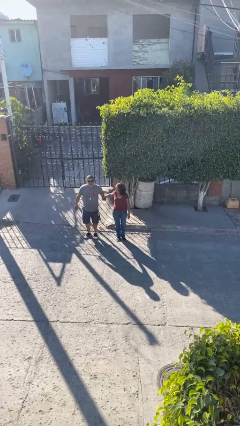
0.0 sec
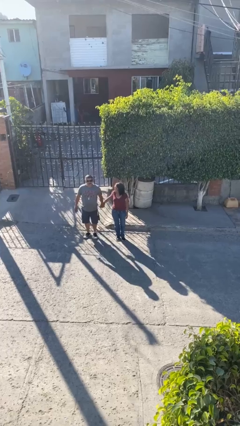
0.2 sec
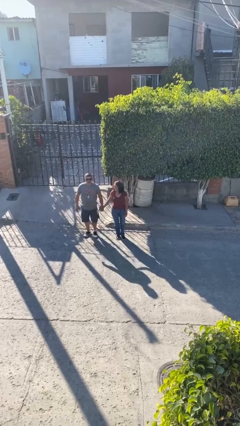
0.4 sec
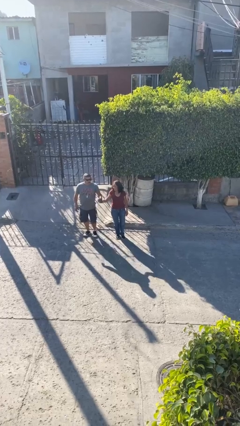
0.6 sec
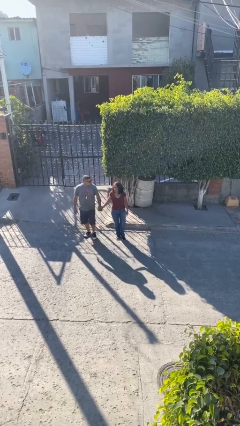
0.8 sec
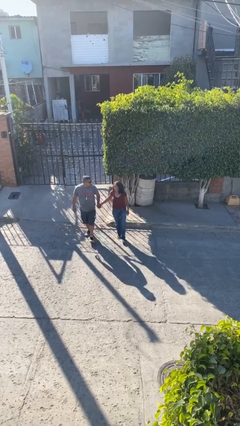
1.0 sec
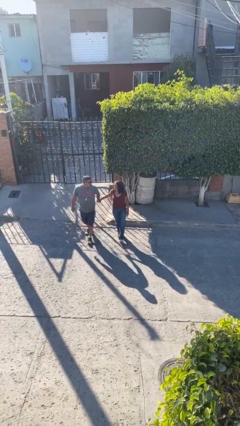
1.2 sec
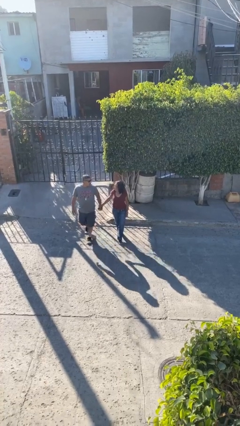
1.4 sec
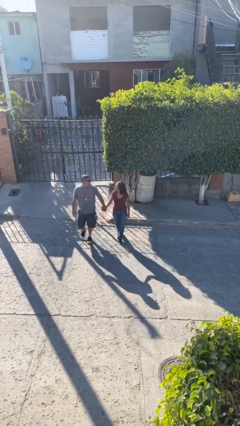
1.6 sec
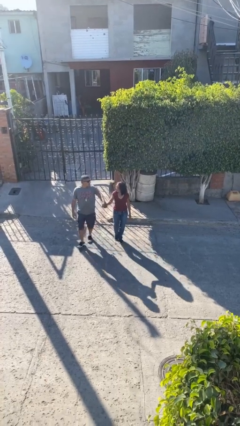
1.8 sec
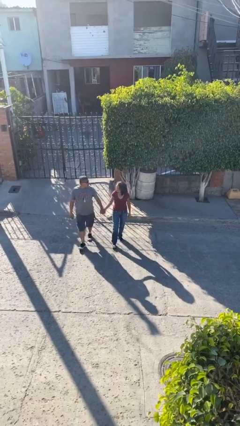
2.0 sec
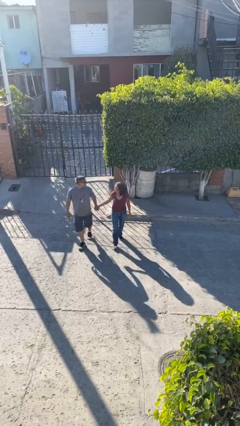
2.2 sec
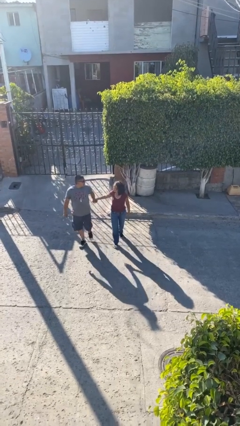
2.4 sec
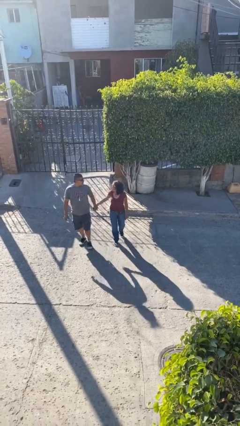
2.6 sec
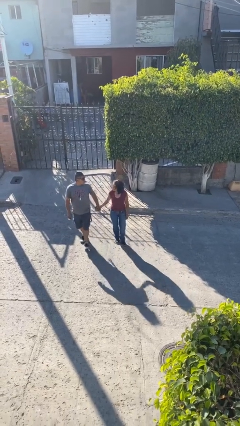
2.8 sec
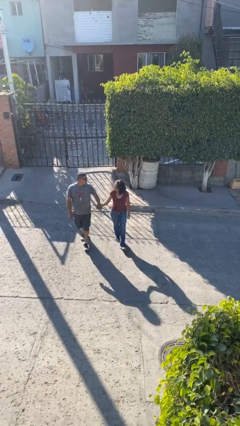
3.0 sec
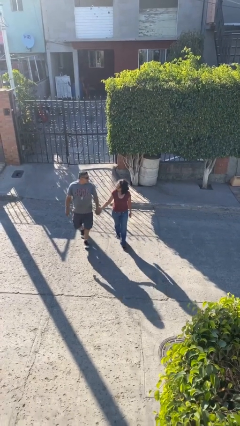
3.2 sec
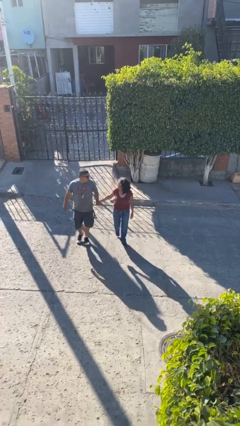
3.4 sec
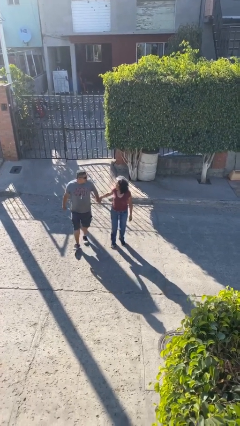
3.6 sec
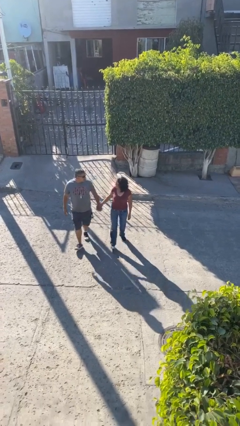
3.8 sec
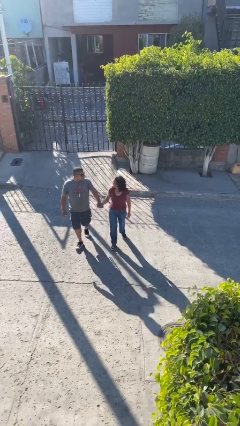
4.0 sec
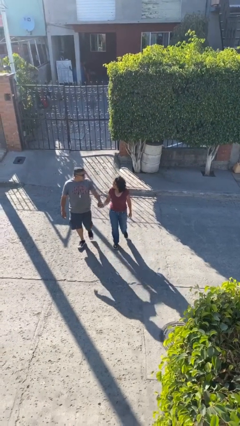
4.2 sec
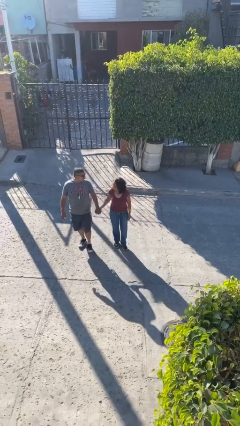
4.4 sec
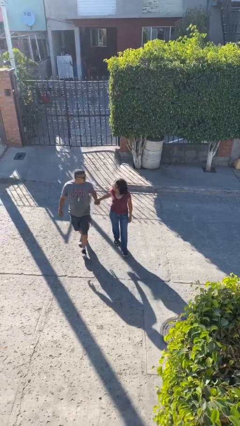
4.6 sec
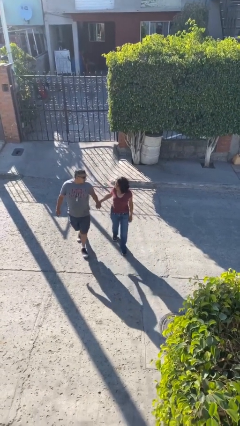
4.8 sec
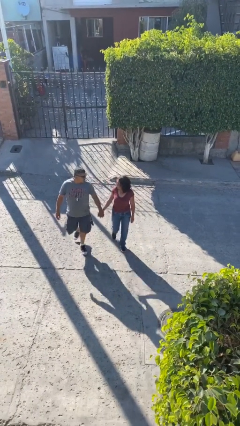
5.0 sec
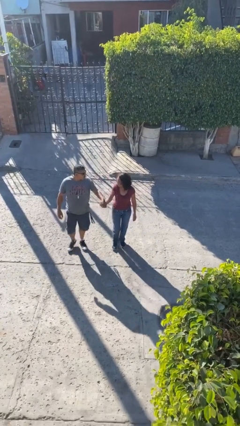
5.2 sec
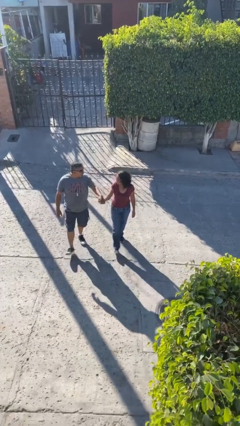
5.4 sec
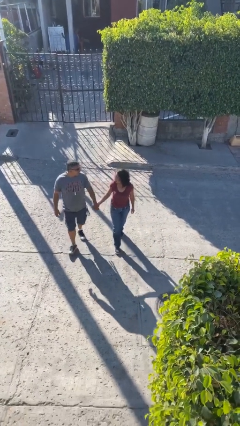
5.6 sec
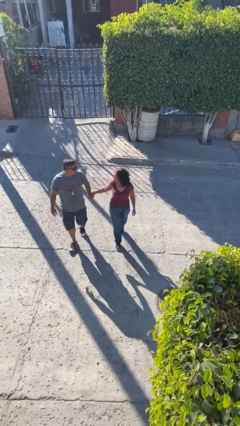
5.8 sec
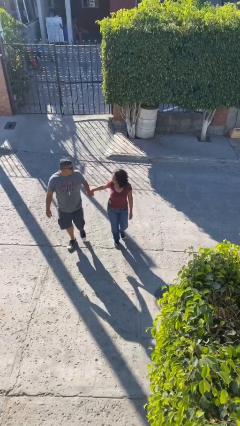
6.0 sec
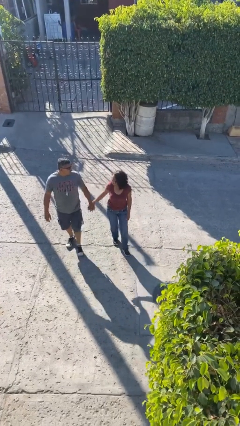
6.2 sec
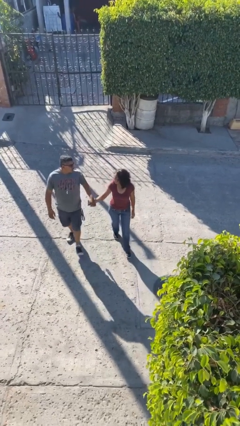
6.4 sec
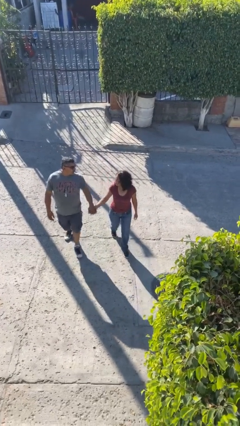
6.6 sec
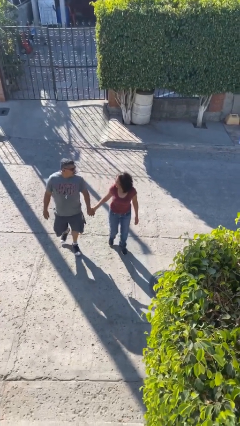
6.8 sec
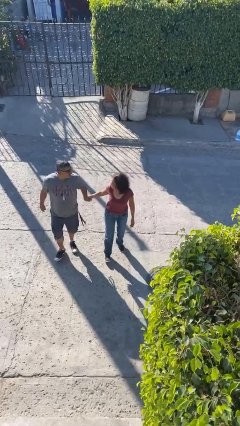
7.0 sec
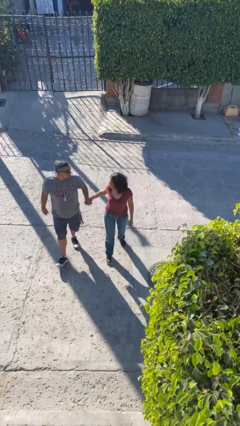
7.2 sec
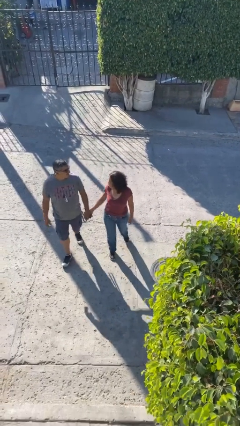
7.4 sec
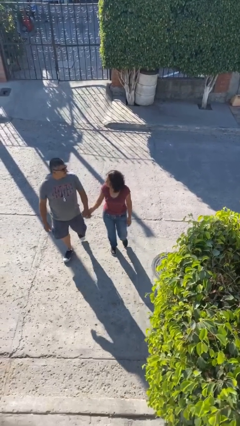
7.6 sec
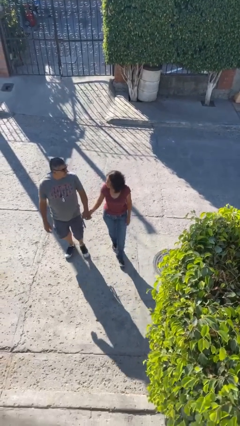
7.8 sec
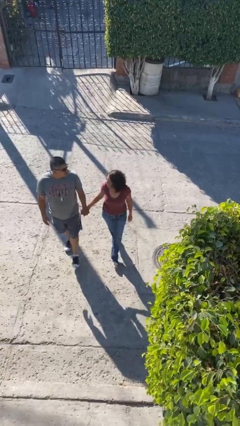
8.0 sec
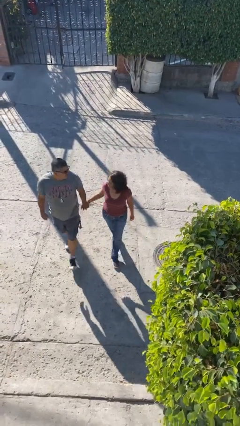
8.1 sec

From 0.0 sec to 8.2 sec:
person holds hand

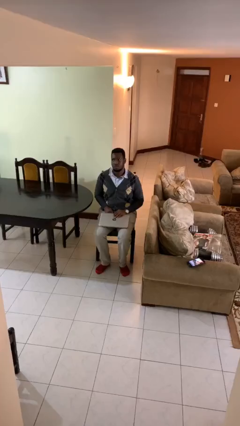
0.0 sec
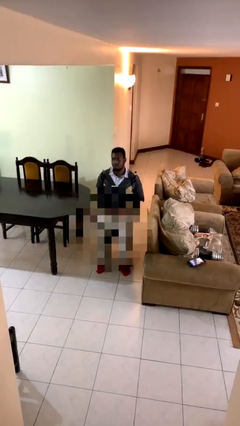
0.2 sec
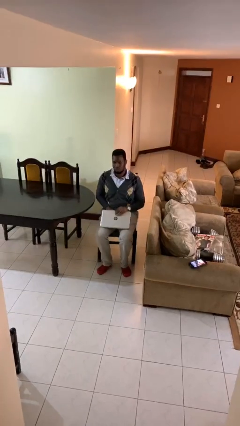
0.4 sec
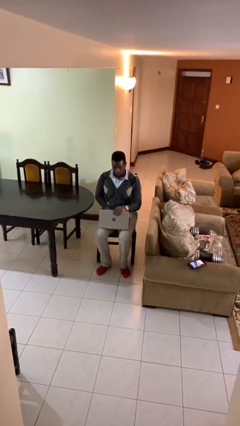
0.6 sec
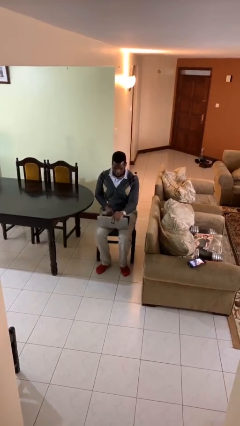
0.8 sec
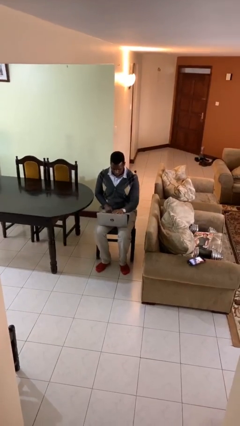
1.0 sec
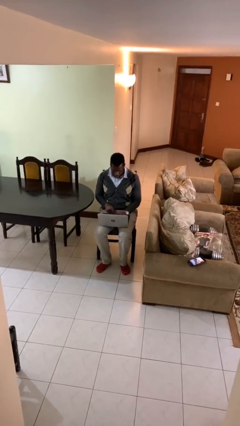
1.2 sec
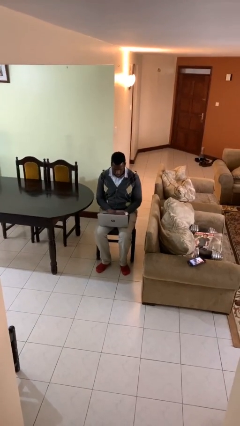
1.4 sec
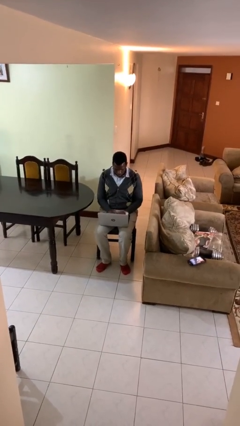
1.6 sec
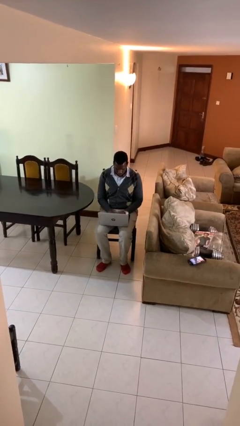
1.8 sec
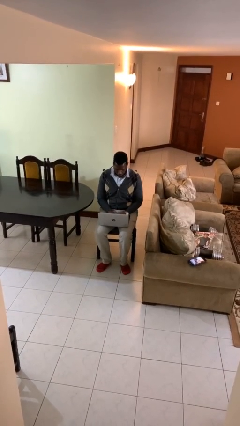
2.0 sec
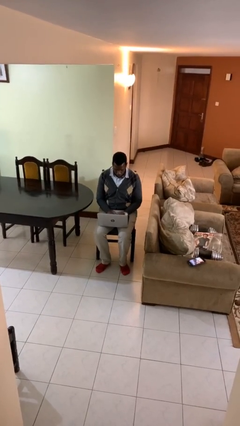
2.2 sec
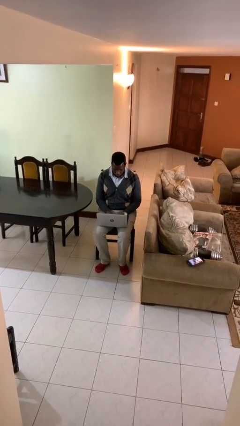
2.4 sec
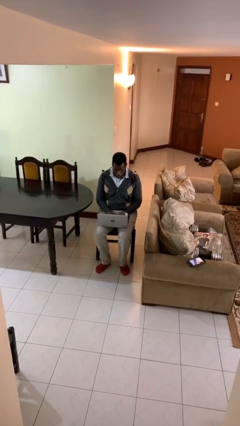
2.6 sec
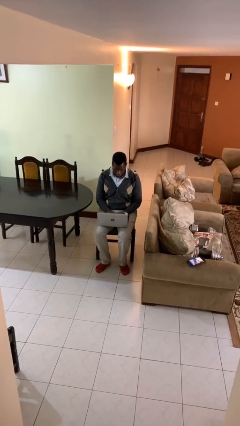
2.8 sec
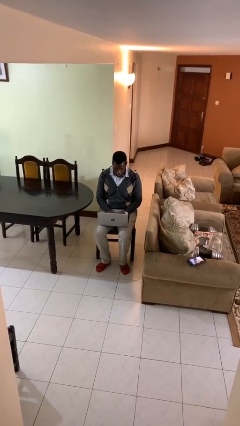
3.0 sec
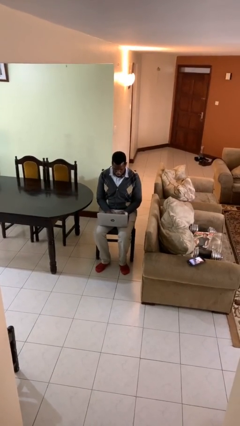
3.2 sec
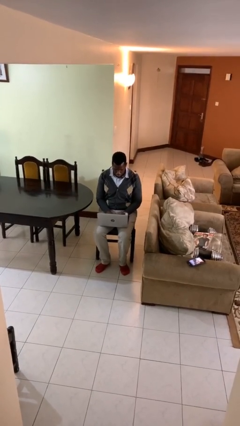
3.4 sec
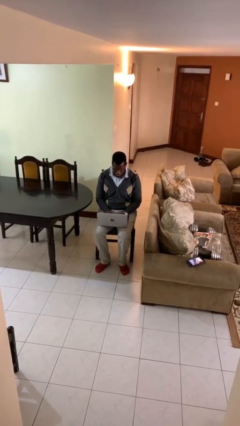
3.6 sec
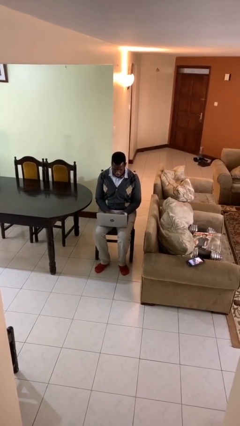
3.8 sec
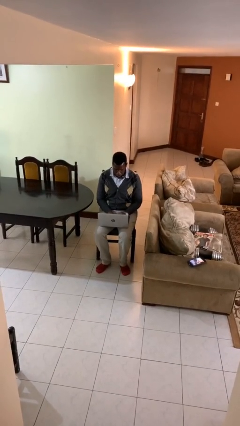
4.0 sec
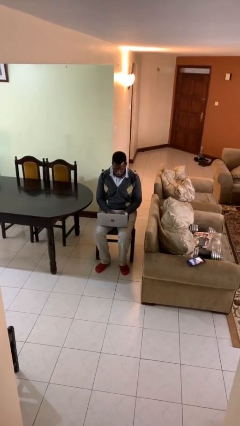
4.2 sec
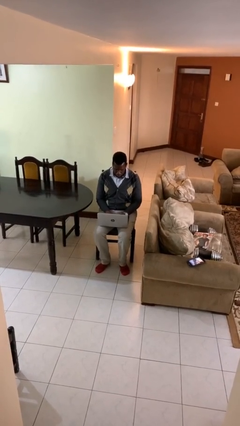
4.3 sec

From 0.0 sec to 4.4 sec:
person interacts with laptop

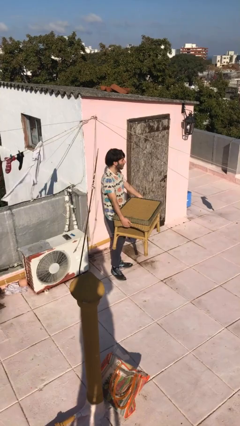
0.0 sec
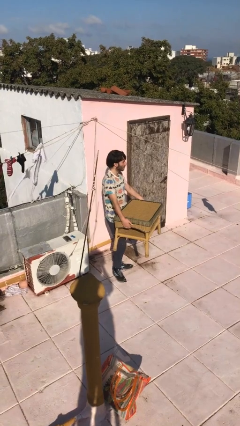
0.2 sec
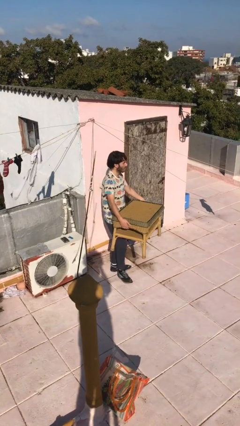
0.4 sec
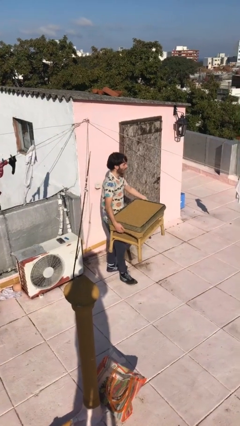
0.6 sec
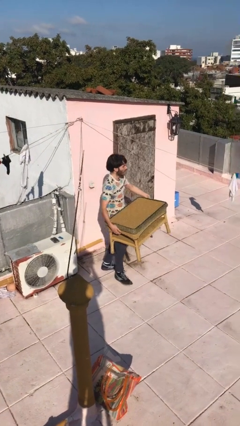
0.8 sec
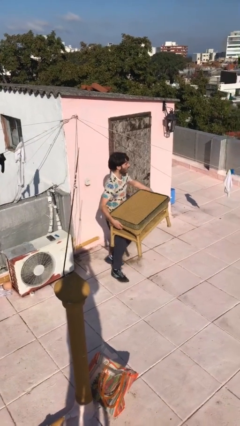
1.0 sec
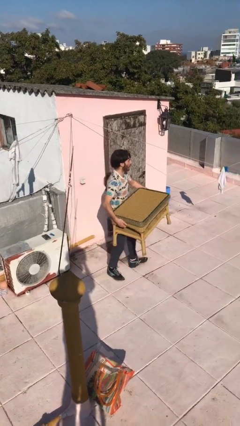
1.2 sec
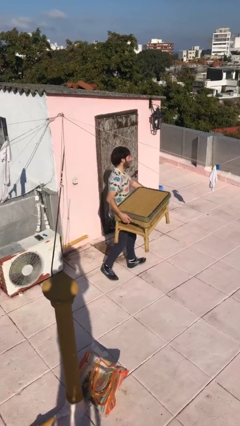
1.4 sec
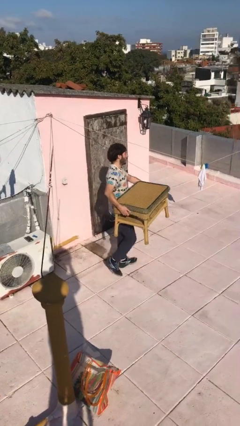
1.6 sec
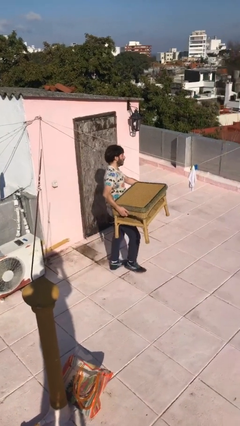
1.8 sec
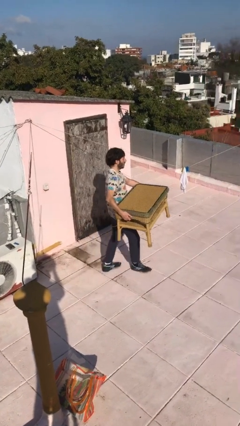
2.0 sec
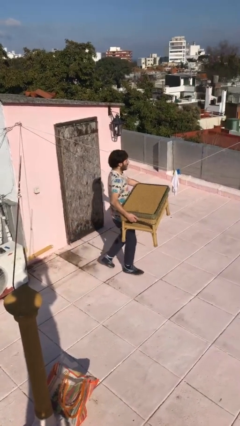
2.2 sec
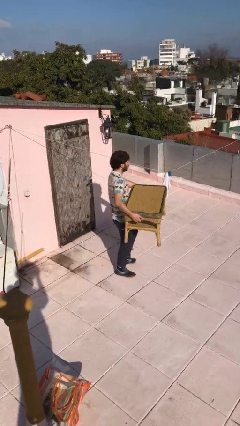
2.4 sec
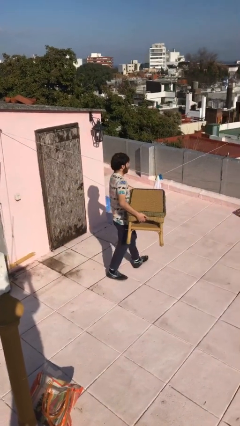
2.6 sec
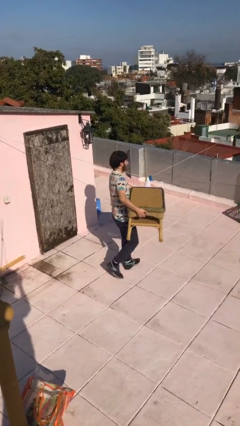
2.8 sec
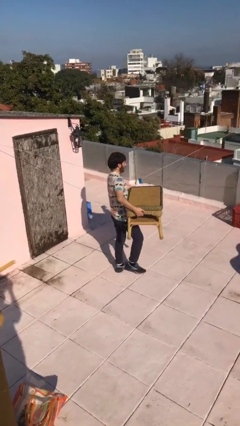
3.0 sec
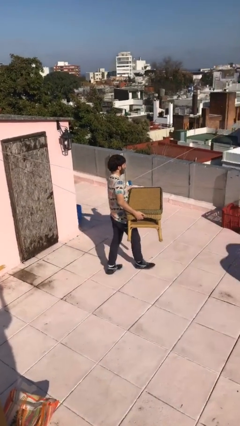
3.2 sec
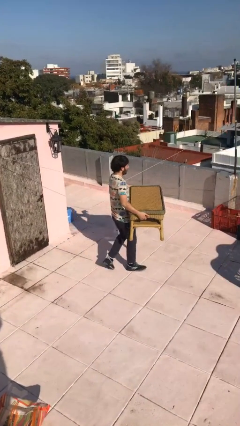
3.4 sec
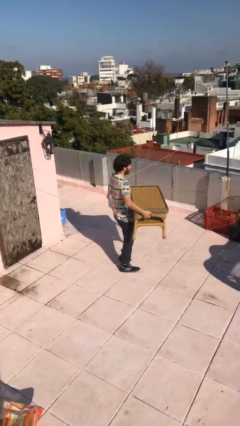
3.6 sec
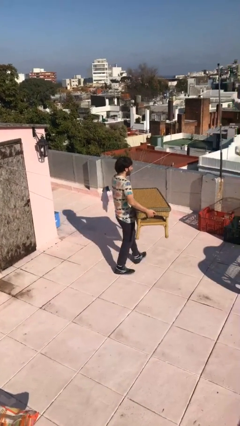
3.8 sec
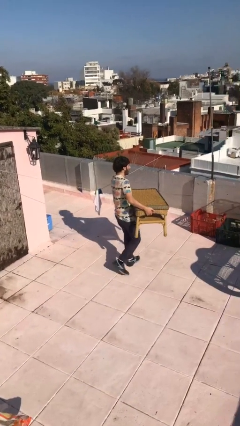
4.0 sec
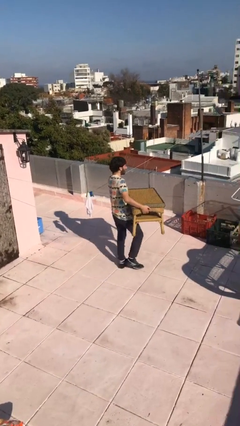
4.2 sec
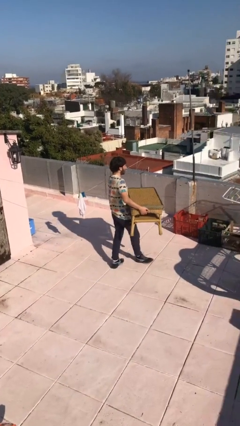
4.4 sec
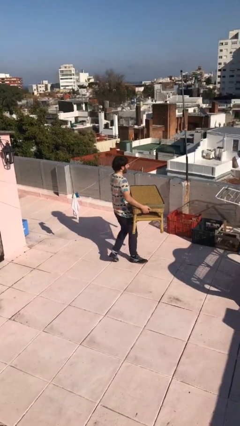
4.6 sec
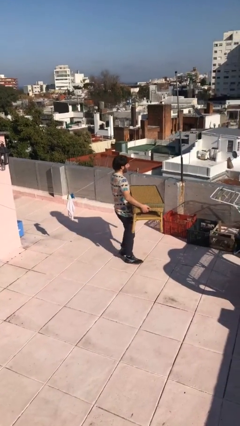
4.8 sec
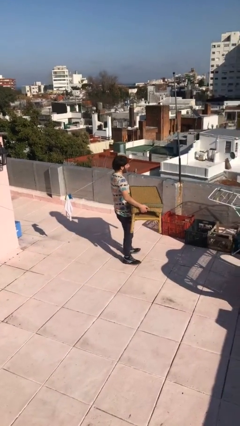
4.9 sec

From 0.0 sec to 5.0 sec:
person carries furniture

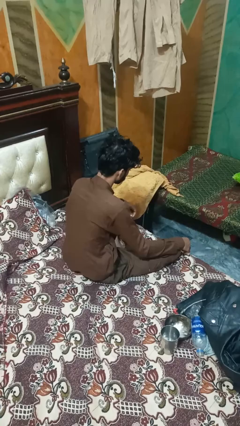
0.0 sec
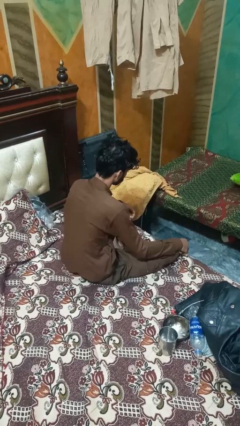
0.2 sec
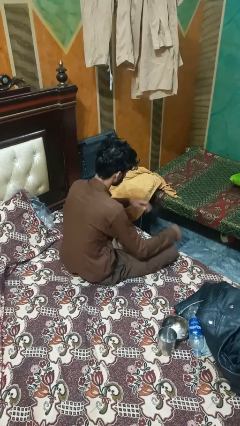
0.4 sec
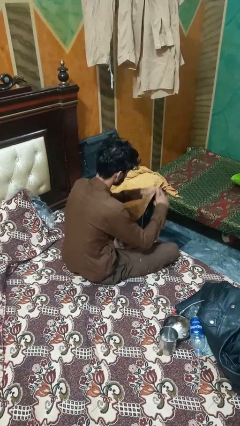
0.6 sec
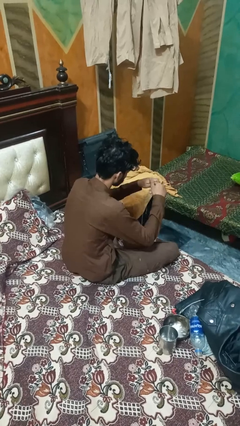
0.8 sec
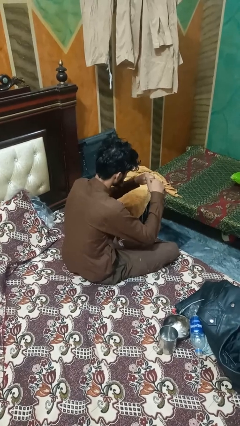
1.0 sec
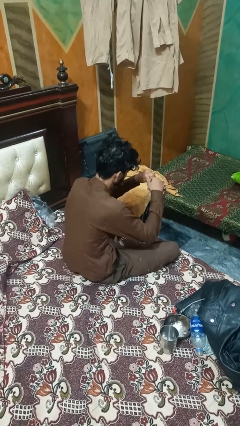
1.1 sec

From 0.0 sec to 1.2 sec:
person snaps fingers
